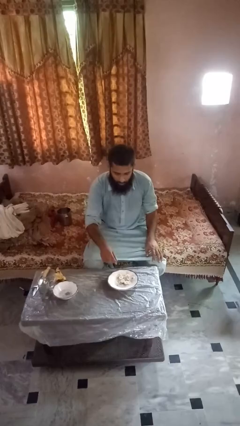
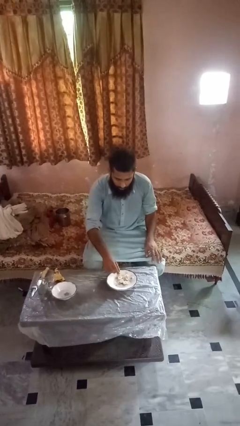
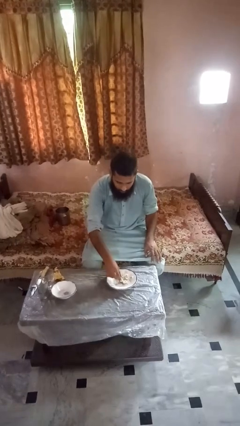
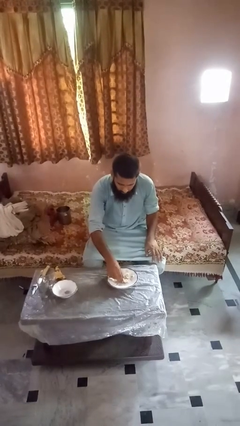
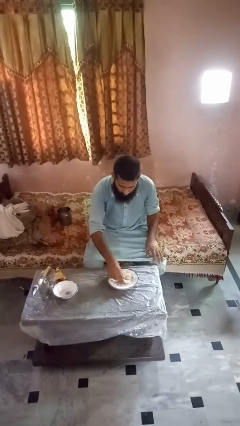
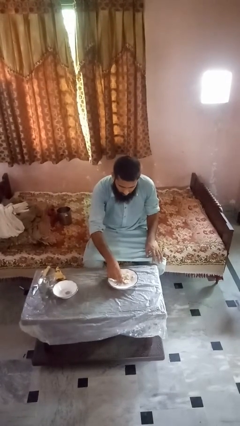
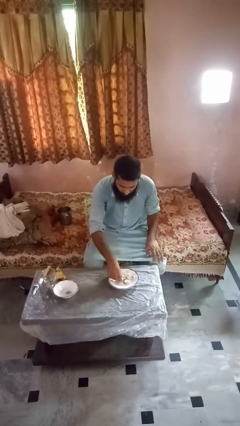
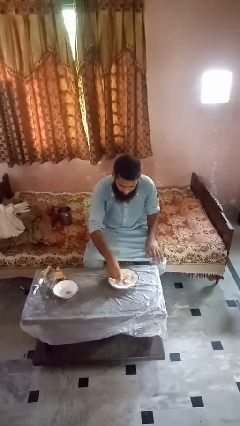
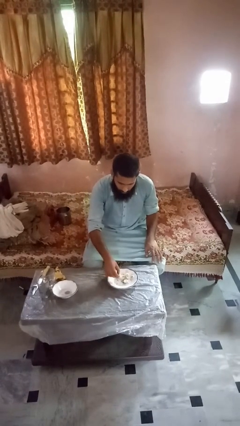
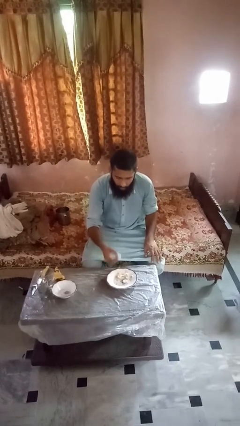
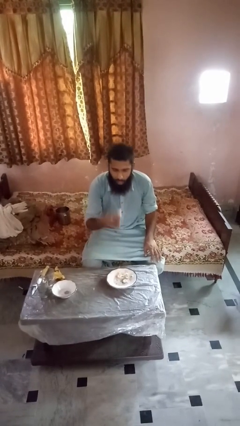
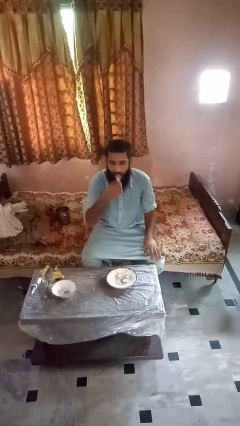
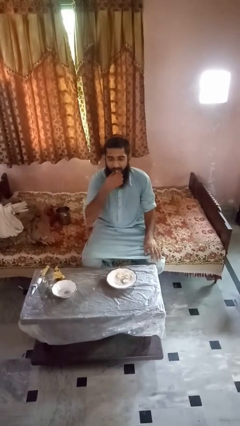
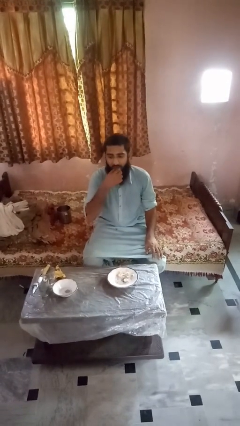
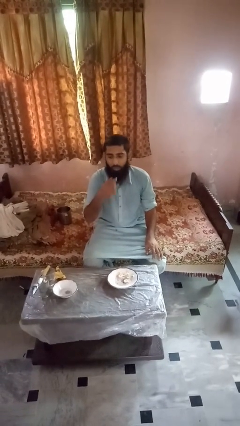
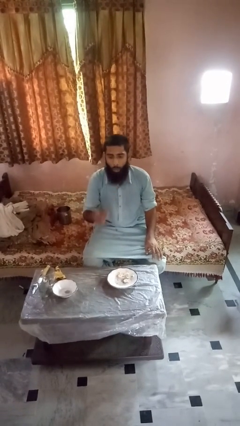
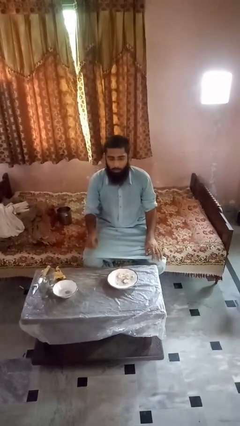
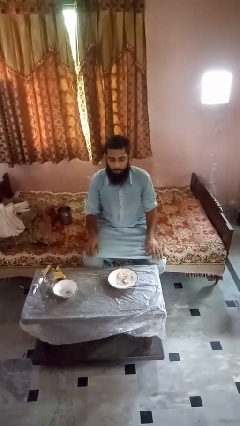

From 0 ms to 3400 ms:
person eats with hands

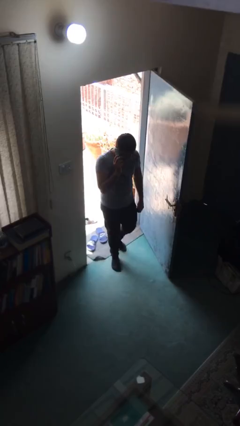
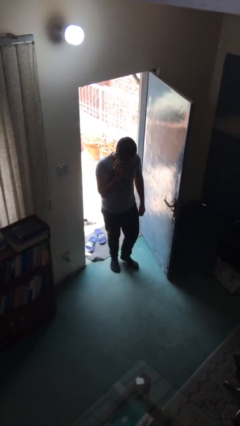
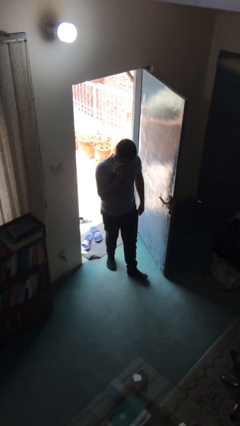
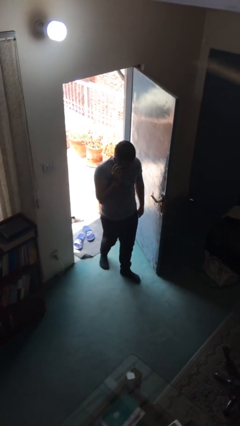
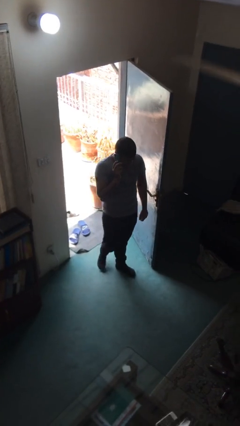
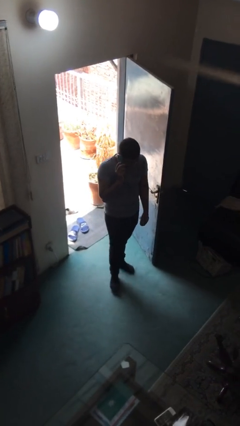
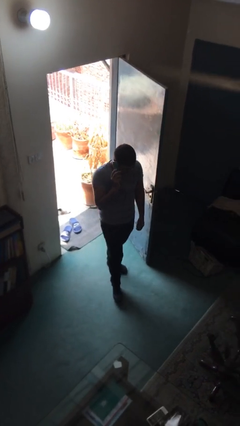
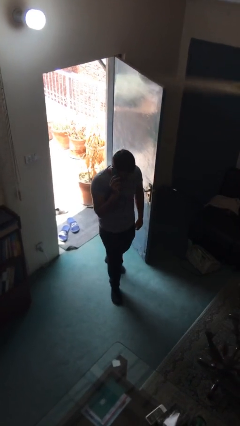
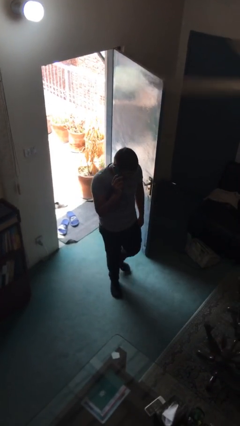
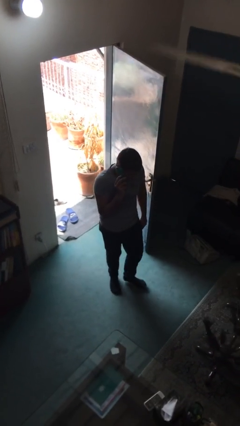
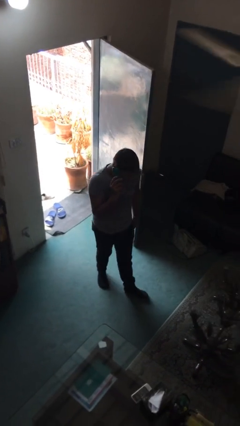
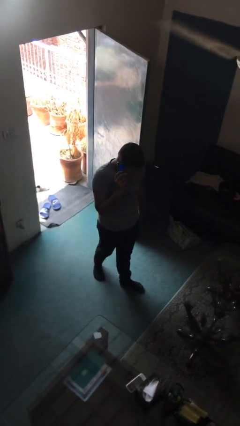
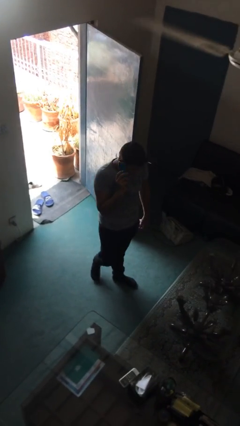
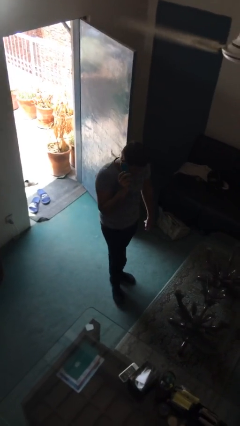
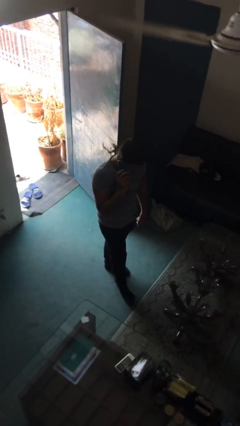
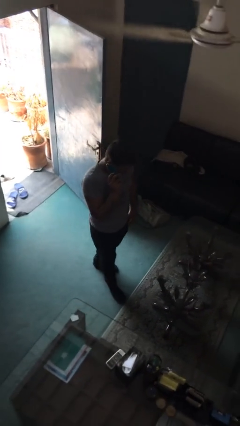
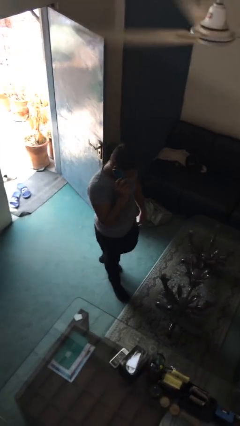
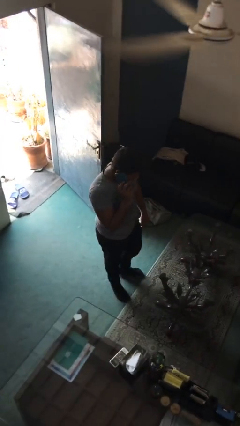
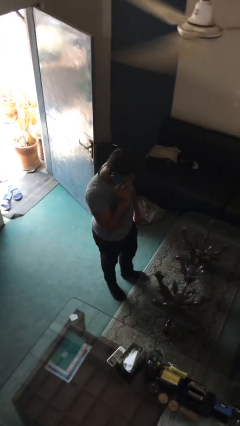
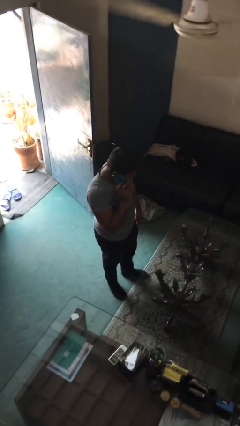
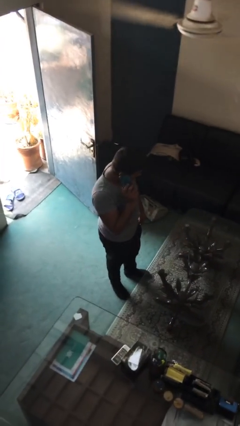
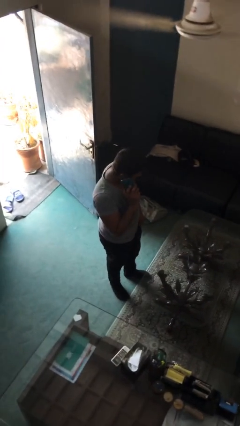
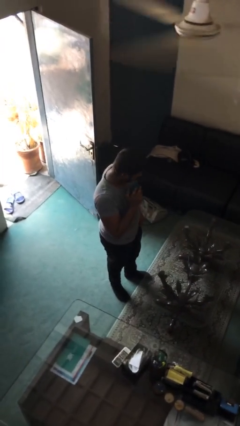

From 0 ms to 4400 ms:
person enters scene through structure

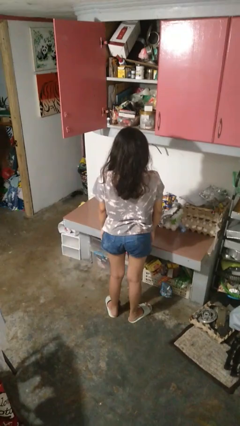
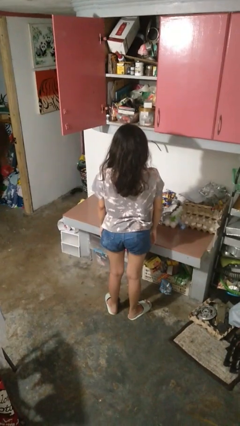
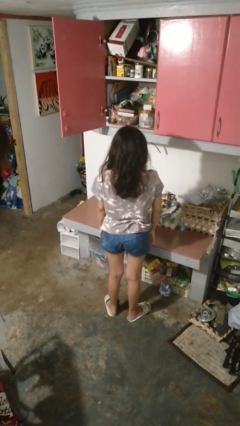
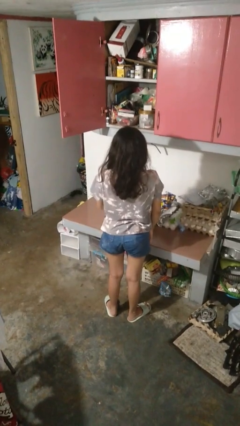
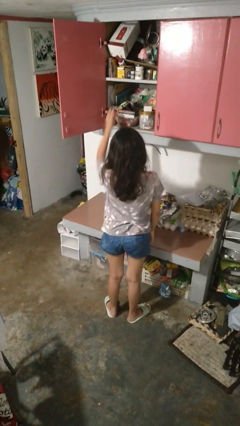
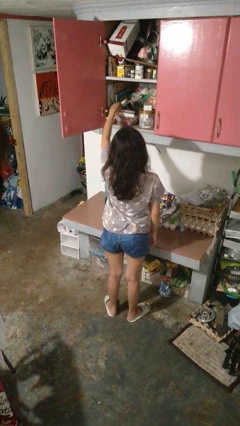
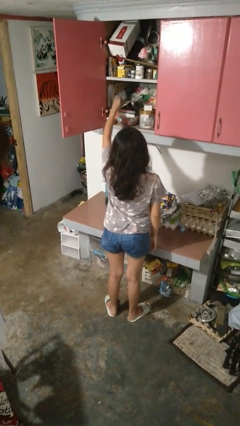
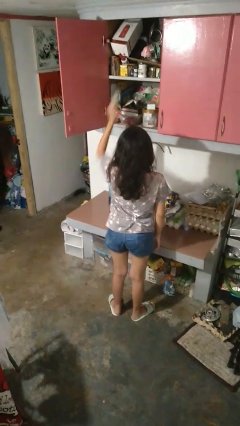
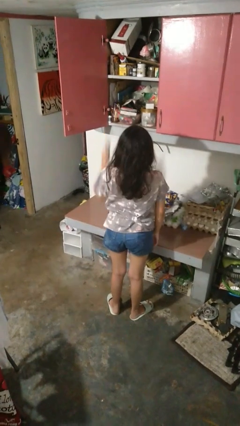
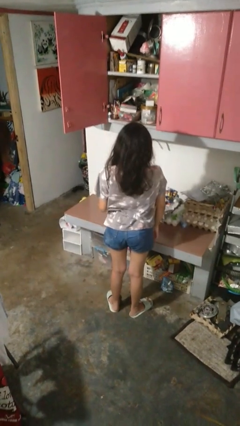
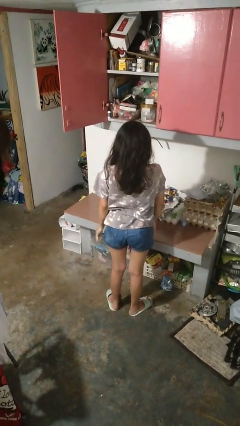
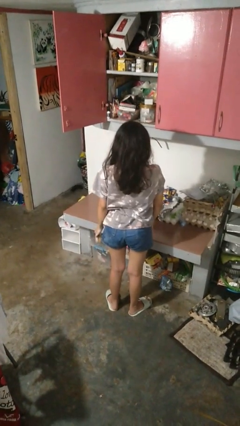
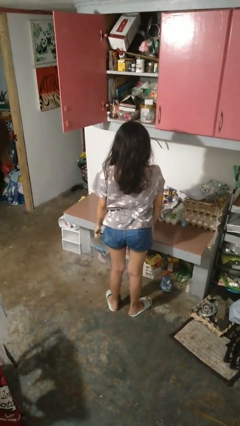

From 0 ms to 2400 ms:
person takes object from cabinet

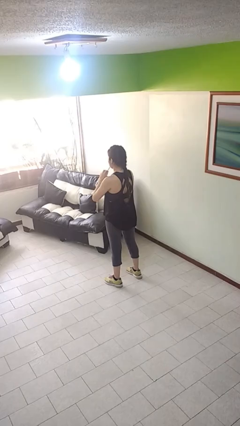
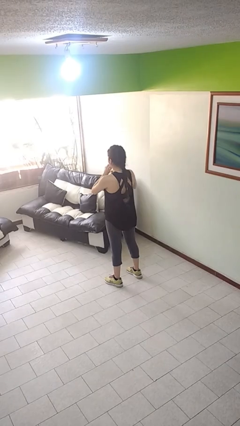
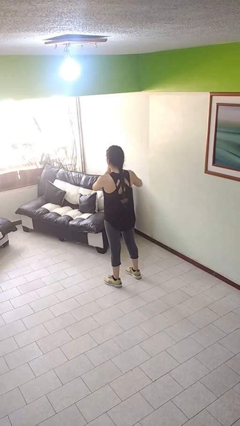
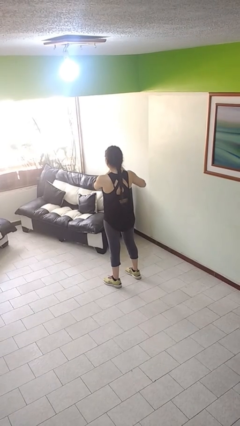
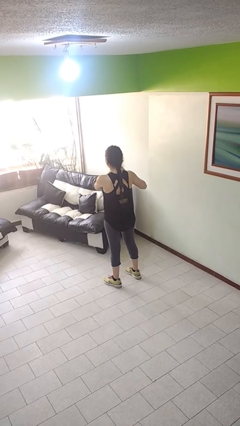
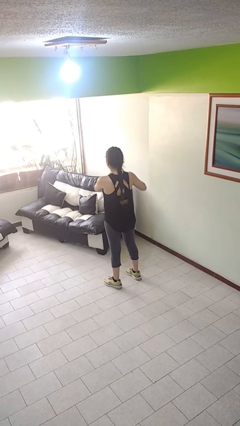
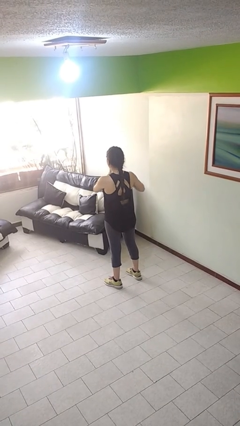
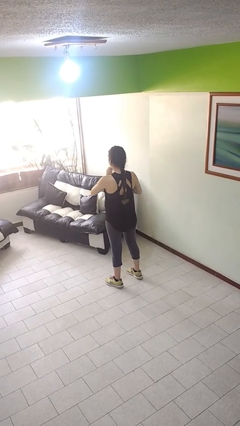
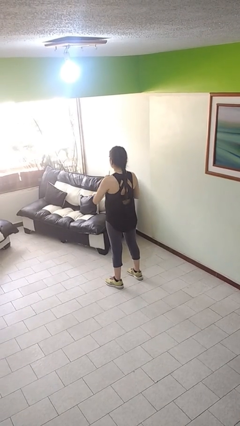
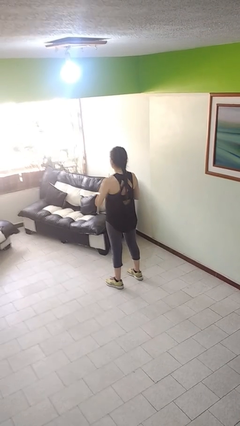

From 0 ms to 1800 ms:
person drinks from straw

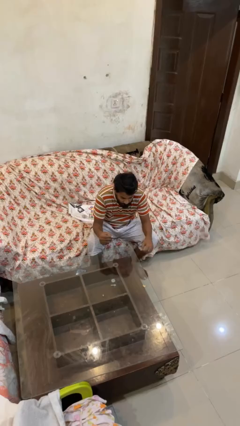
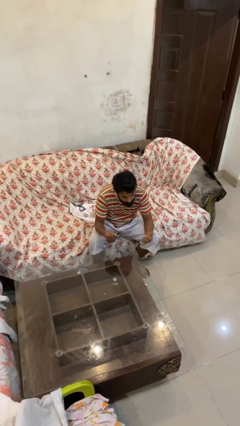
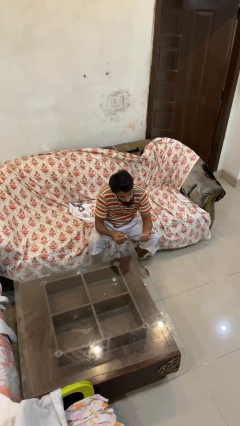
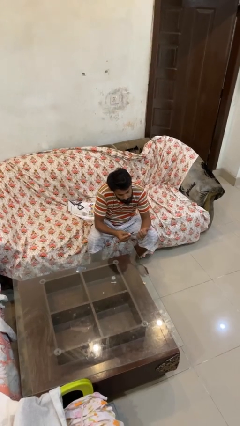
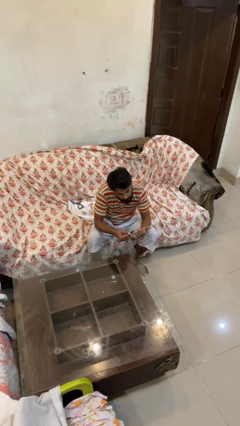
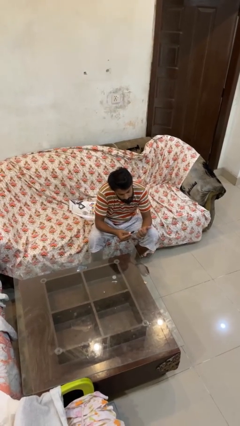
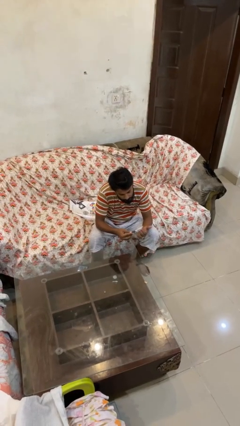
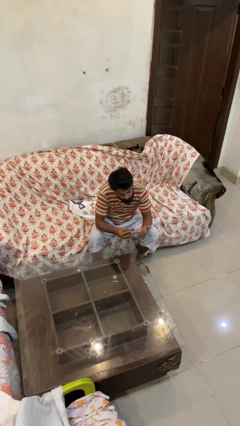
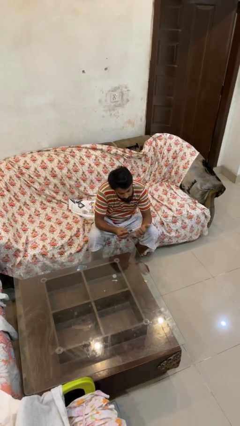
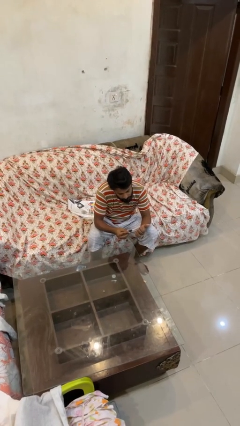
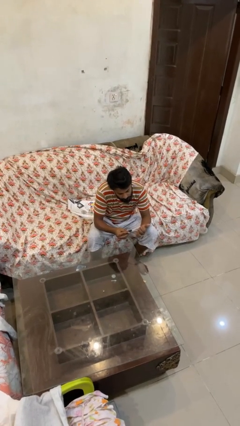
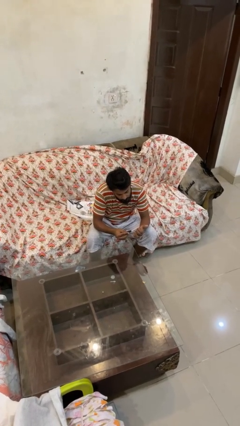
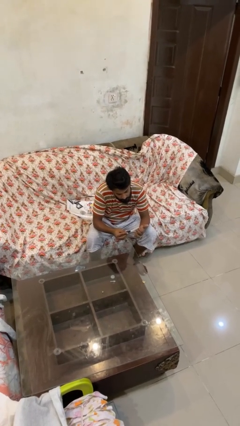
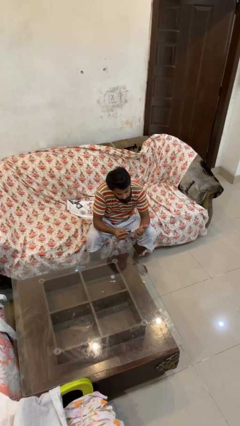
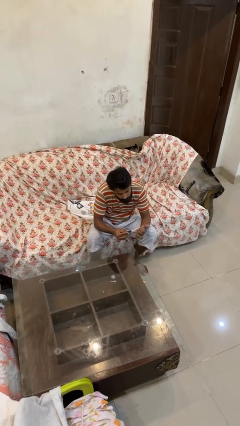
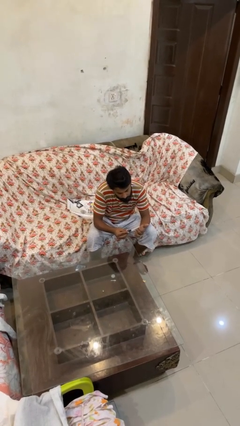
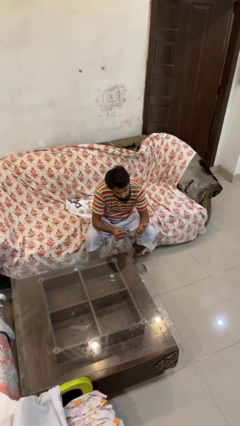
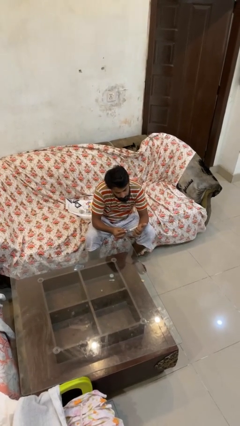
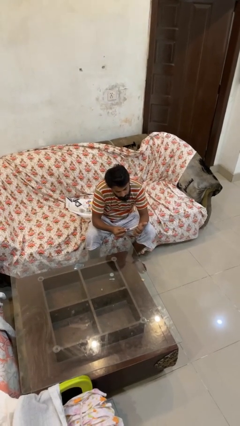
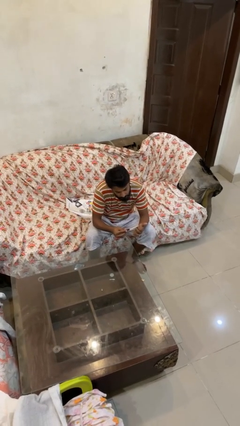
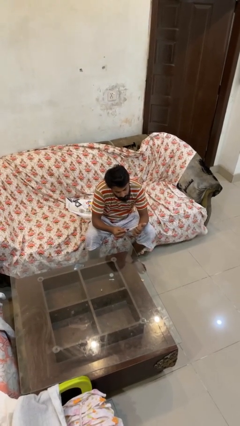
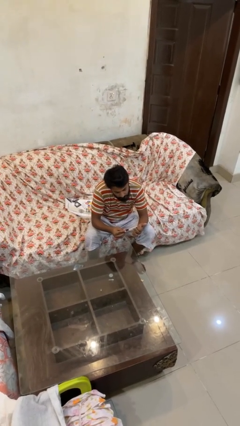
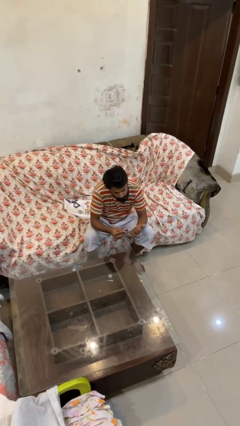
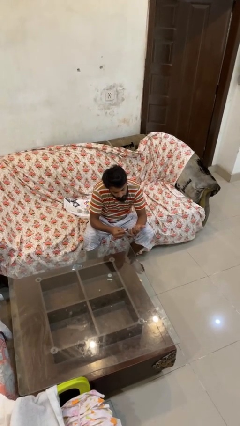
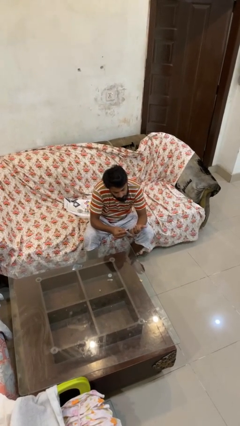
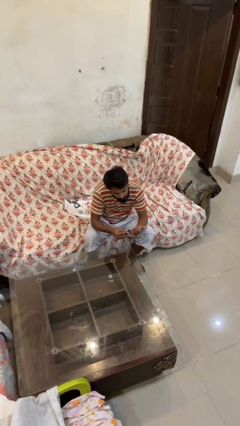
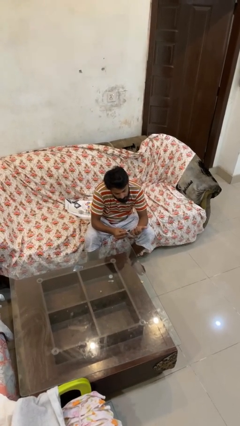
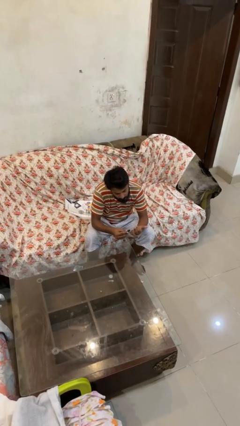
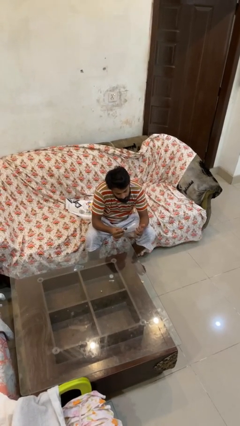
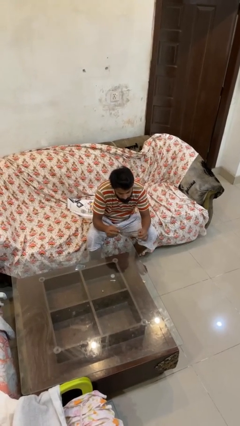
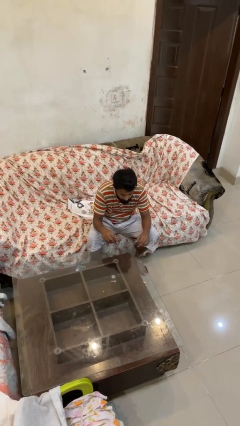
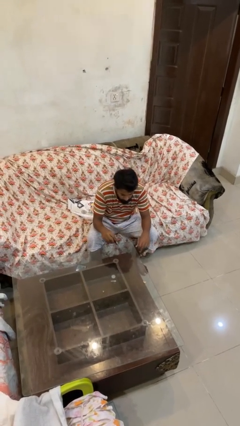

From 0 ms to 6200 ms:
person files fingernails
